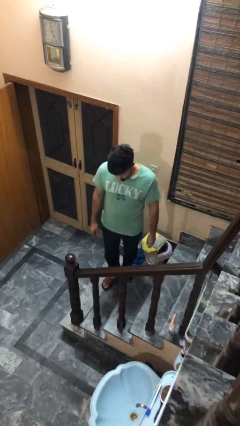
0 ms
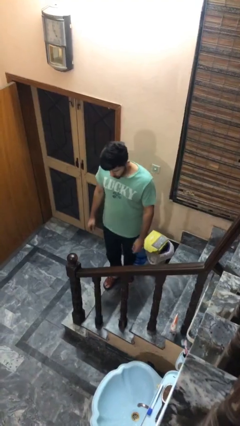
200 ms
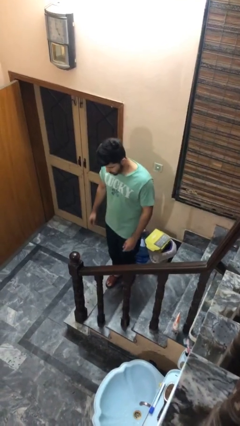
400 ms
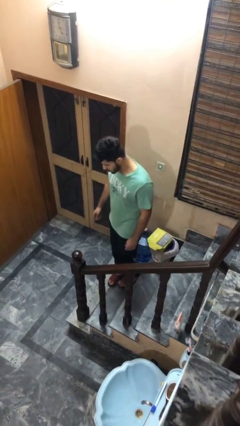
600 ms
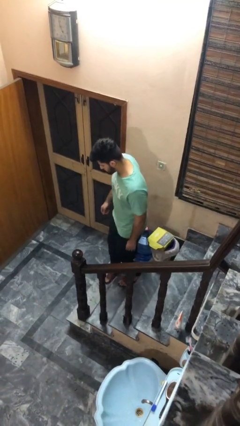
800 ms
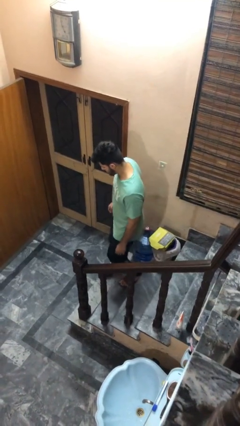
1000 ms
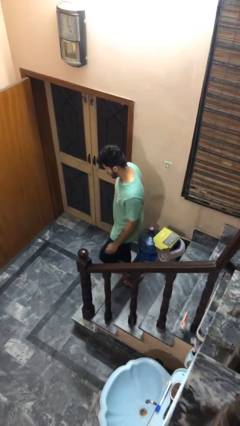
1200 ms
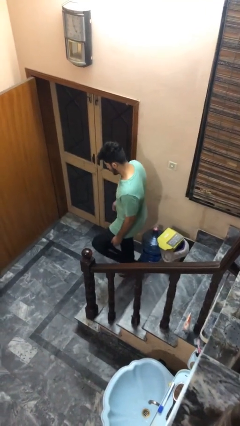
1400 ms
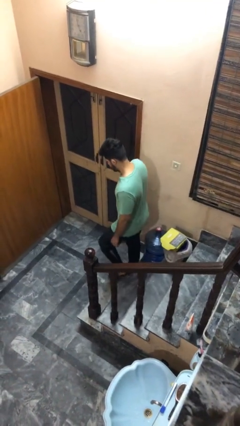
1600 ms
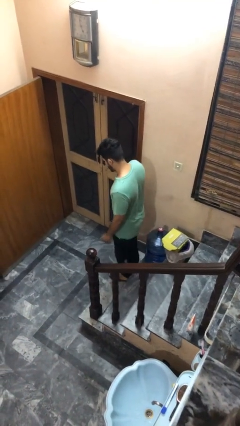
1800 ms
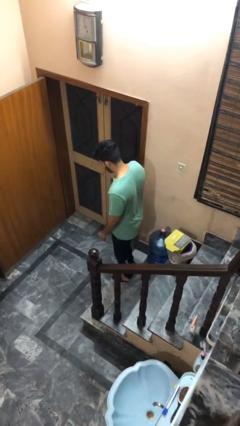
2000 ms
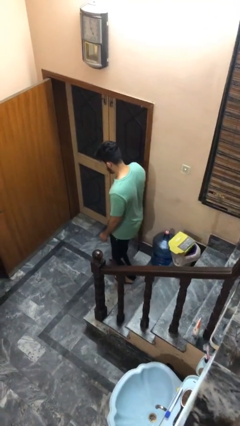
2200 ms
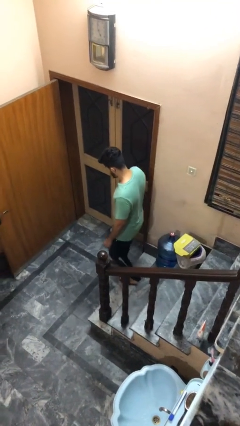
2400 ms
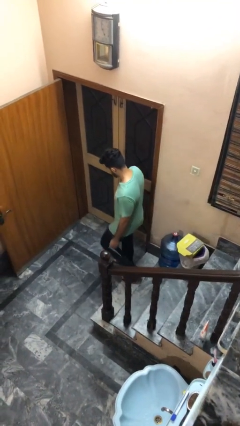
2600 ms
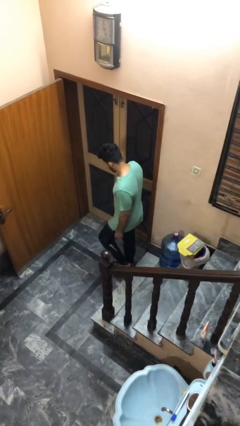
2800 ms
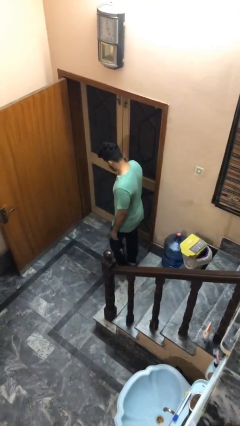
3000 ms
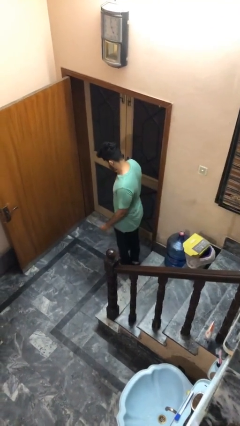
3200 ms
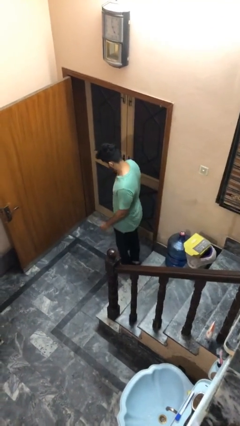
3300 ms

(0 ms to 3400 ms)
person climbs down stairs

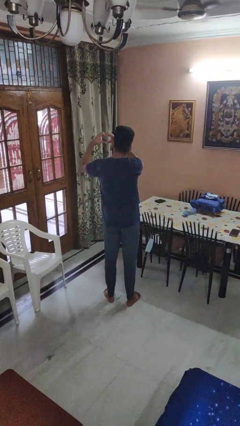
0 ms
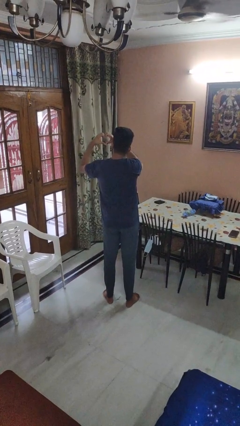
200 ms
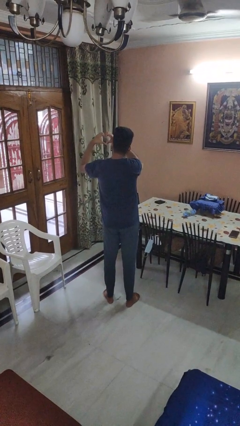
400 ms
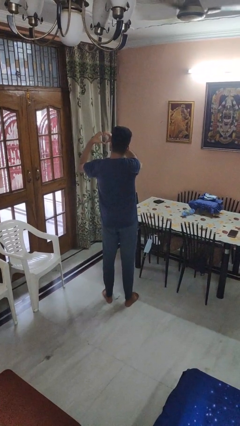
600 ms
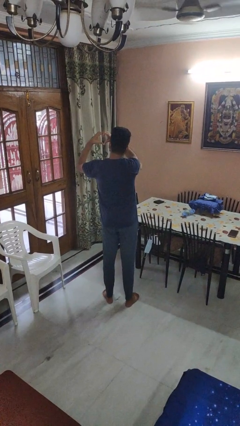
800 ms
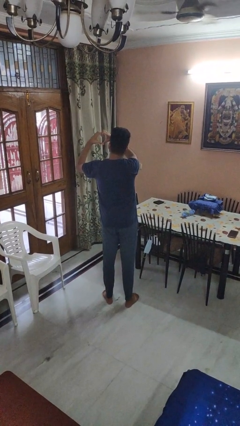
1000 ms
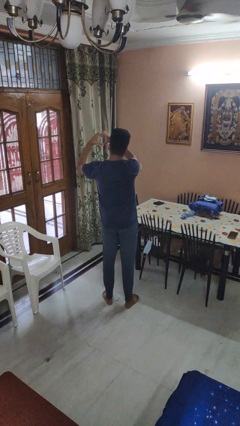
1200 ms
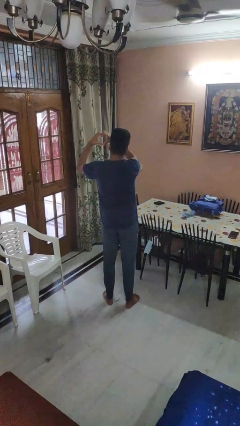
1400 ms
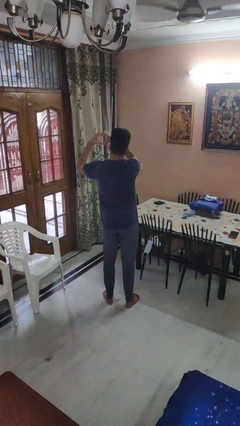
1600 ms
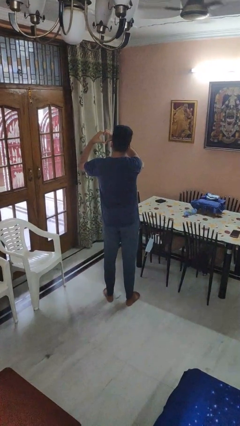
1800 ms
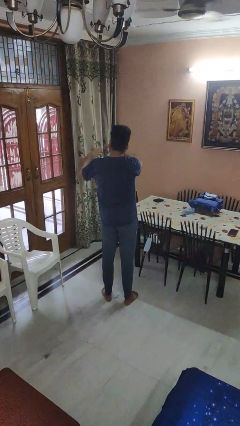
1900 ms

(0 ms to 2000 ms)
person gestures heart

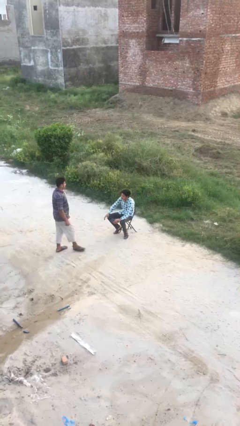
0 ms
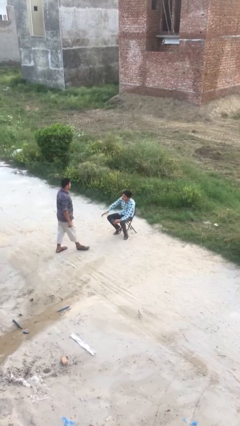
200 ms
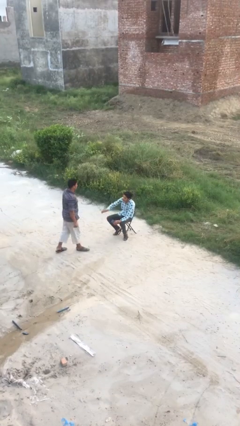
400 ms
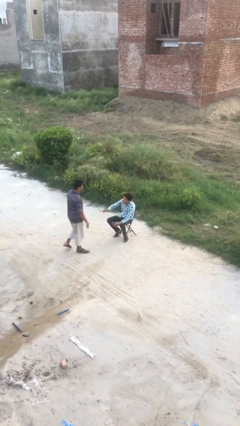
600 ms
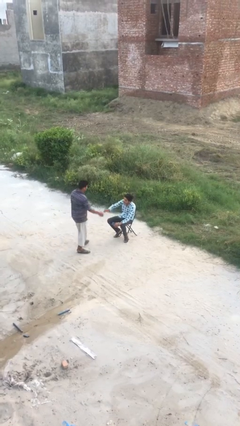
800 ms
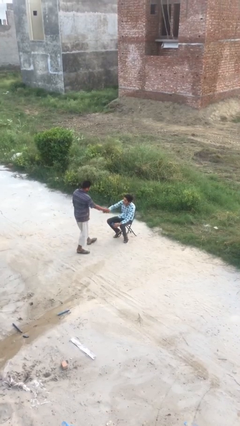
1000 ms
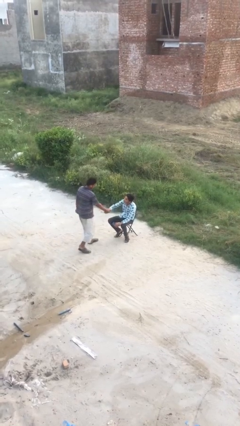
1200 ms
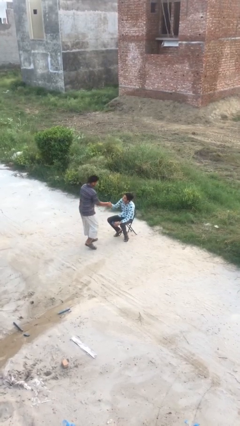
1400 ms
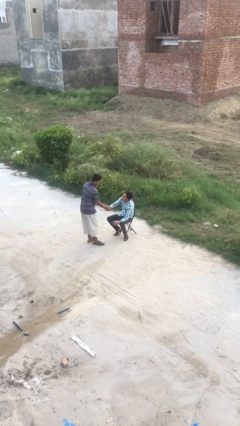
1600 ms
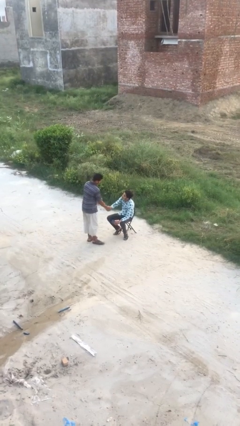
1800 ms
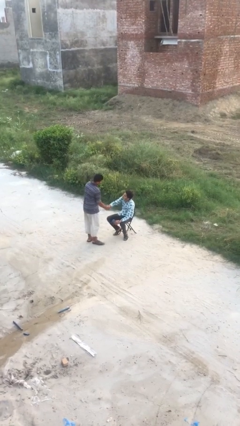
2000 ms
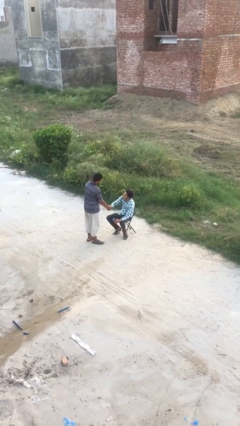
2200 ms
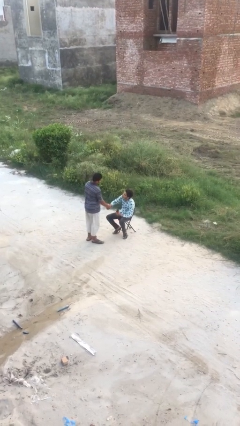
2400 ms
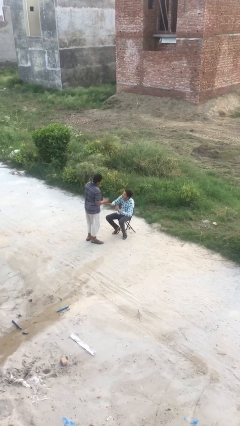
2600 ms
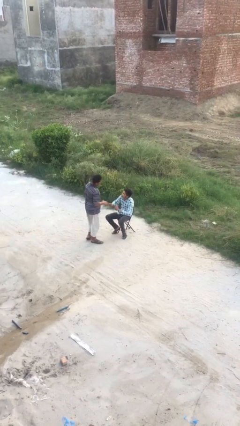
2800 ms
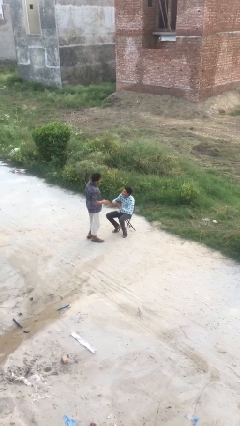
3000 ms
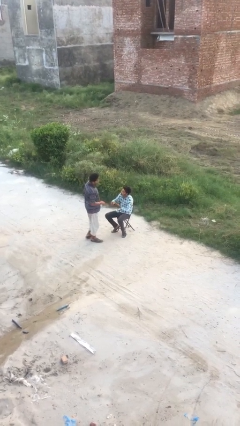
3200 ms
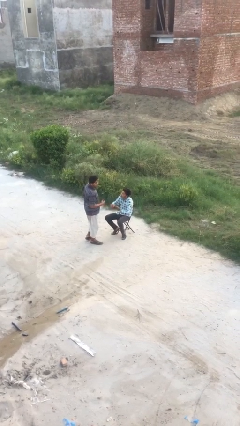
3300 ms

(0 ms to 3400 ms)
person shakes hand

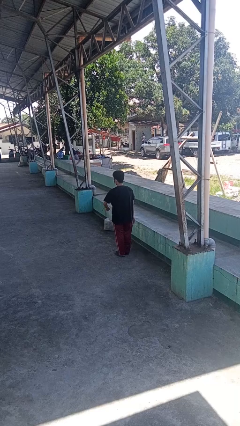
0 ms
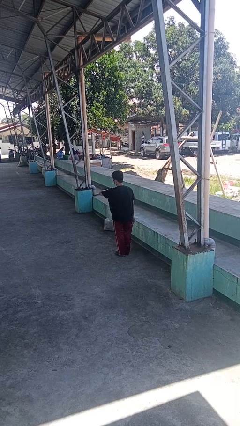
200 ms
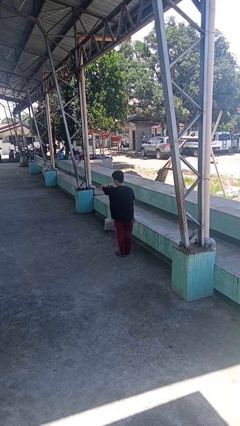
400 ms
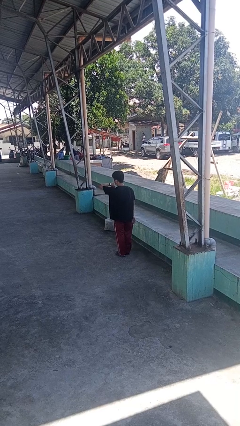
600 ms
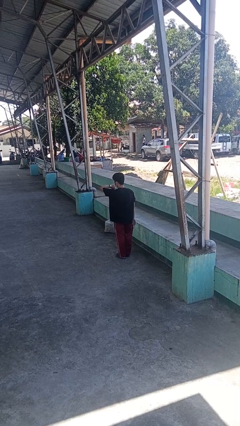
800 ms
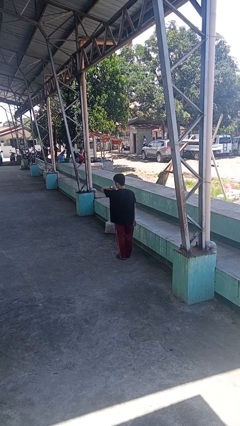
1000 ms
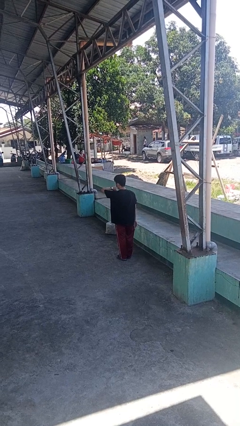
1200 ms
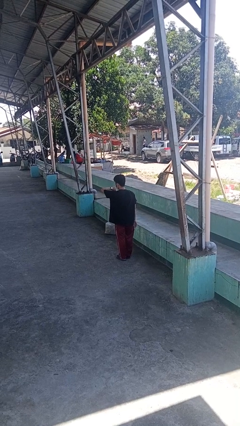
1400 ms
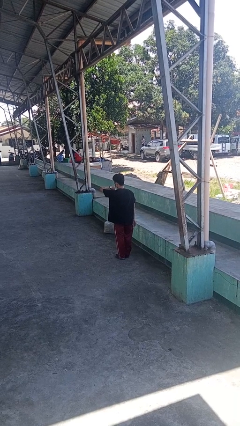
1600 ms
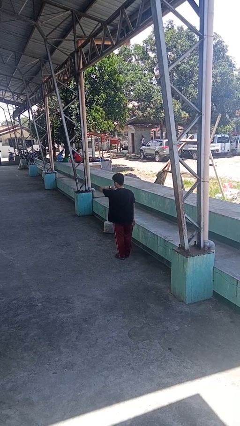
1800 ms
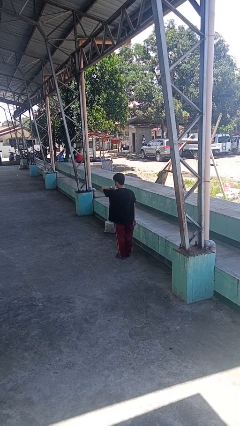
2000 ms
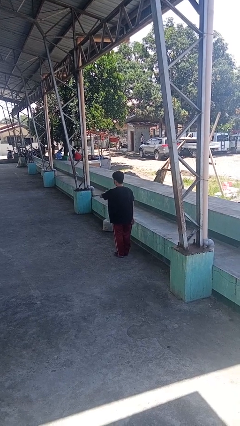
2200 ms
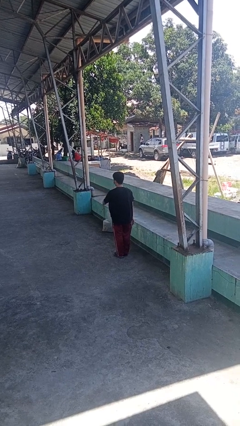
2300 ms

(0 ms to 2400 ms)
person looks at wristwatch

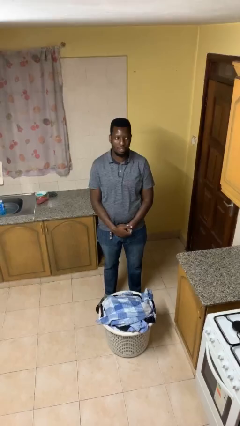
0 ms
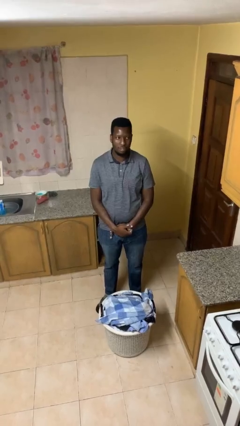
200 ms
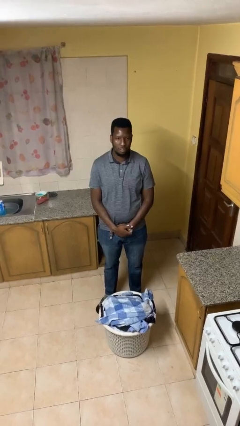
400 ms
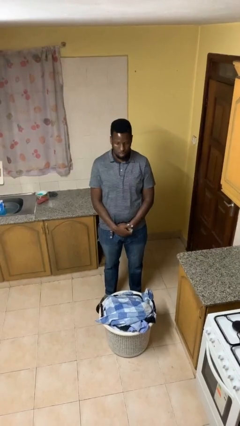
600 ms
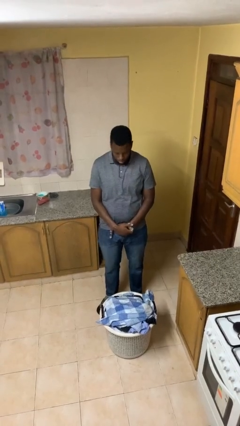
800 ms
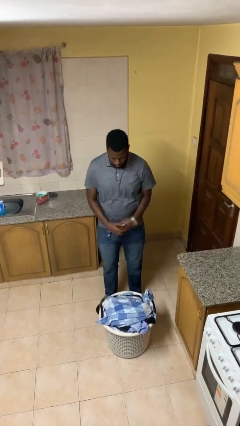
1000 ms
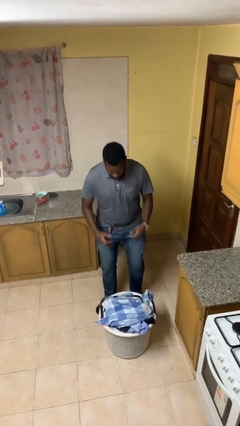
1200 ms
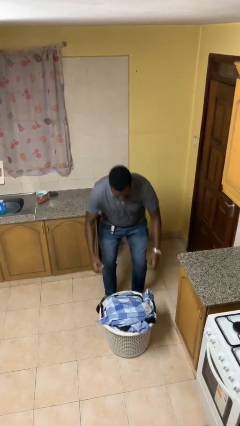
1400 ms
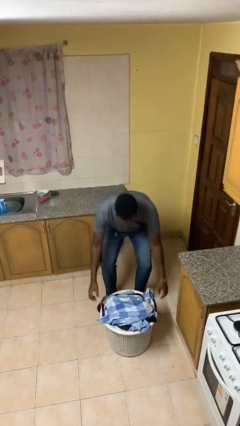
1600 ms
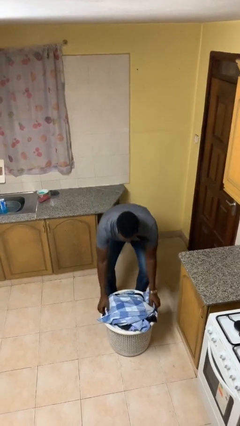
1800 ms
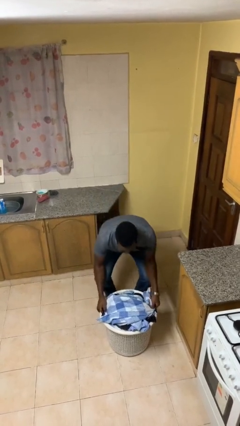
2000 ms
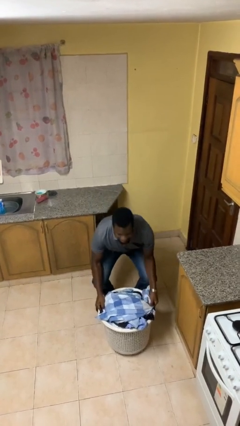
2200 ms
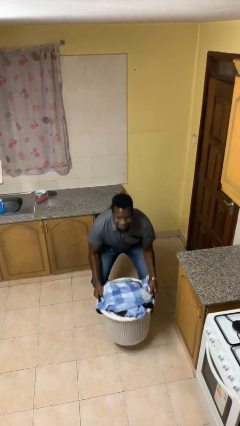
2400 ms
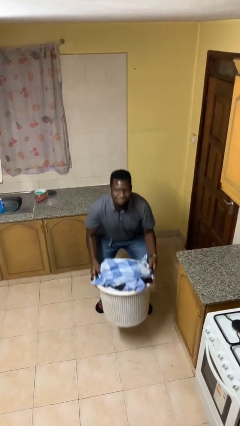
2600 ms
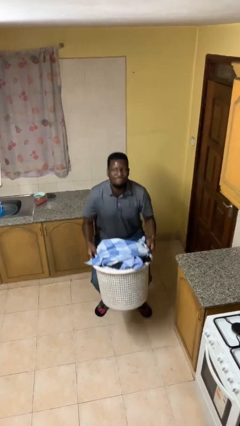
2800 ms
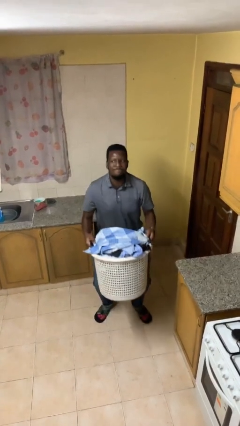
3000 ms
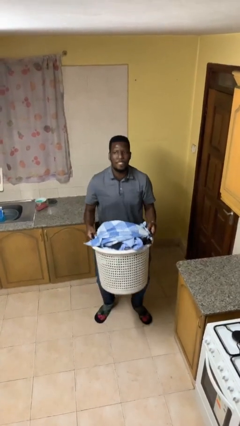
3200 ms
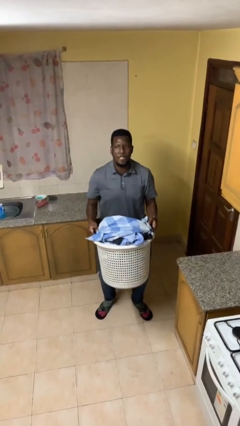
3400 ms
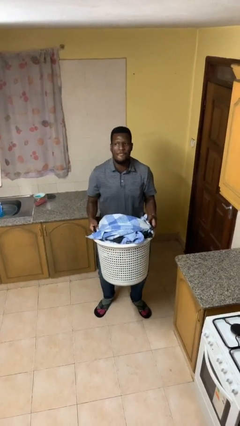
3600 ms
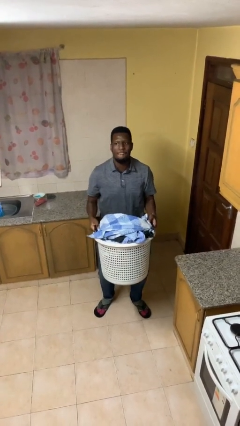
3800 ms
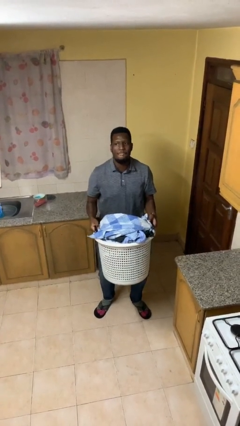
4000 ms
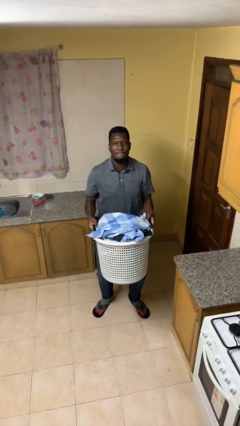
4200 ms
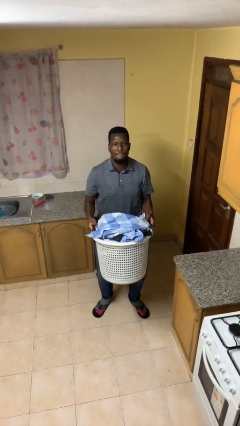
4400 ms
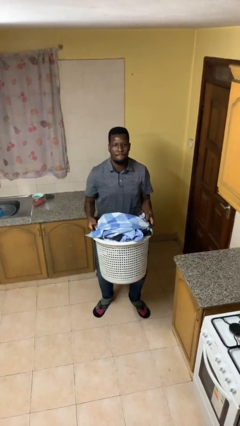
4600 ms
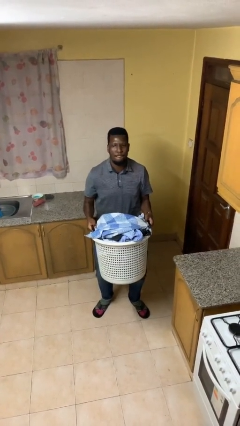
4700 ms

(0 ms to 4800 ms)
person picks up object from floor

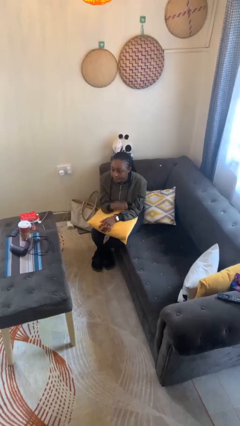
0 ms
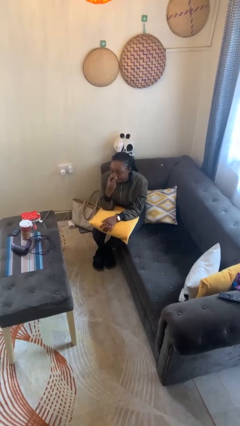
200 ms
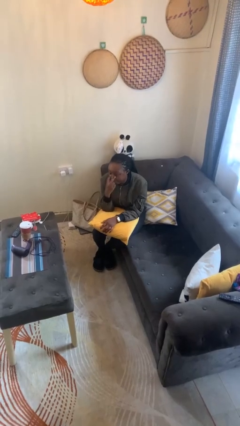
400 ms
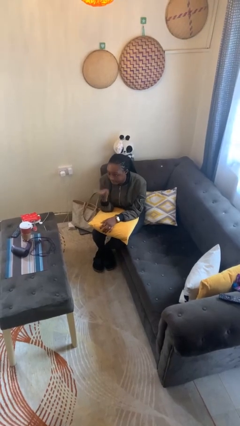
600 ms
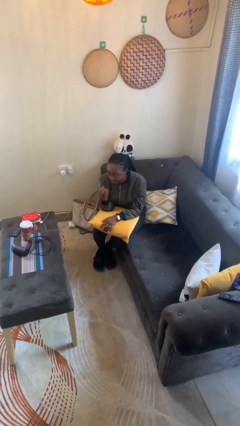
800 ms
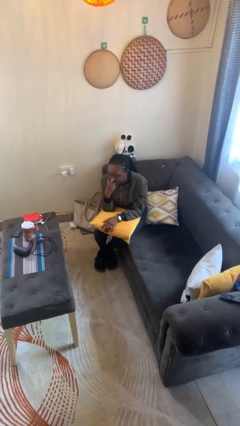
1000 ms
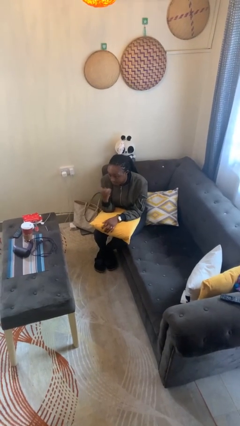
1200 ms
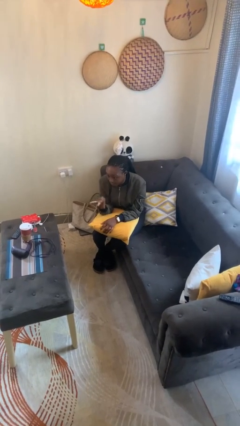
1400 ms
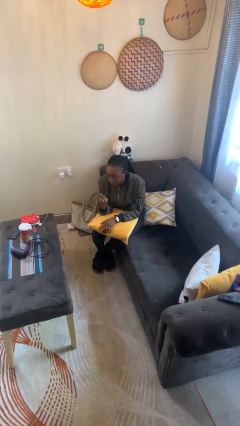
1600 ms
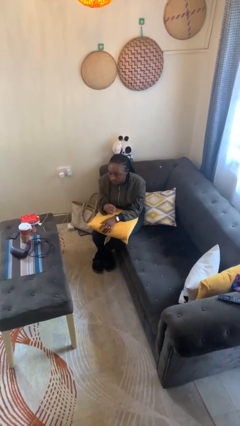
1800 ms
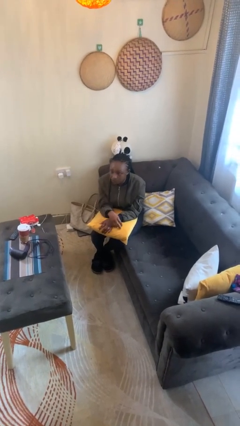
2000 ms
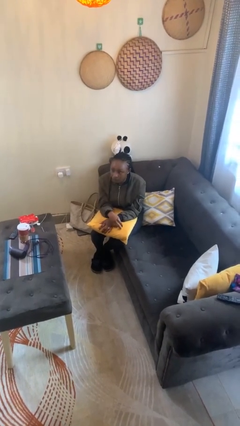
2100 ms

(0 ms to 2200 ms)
person gestures watch closely
